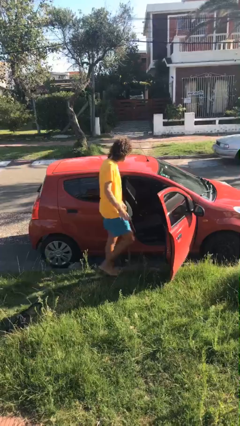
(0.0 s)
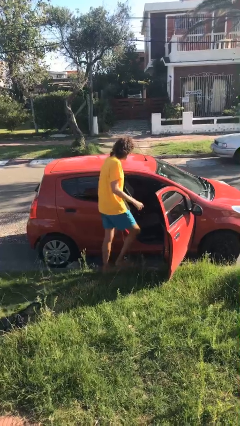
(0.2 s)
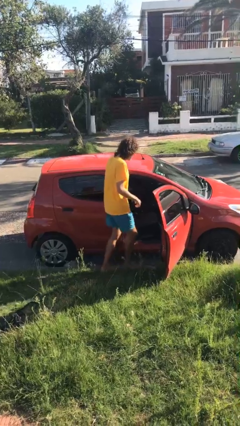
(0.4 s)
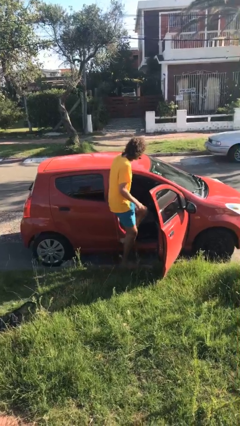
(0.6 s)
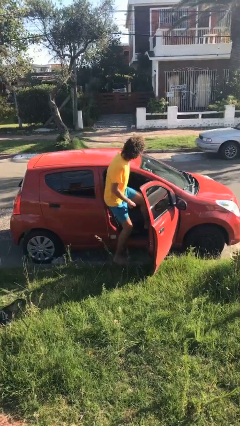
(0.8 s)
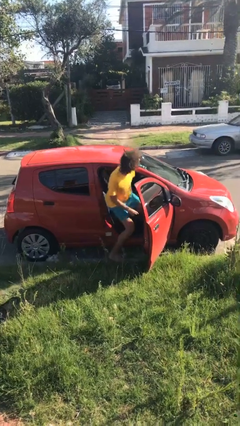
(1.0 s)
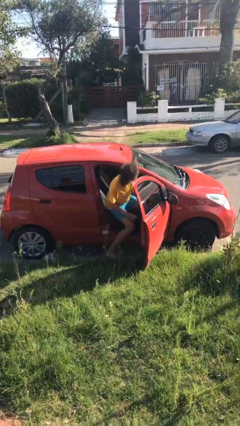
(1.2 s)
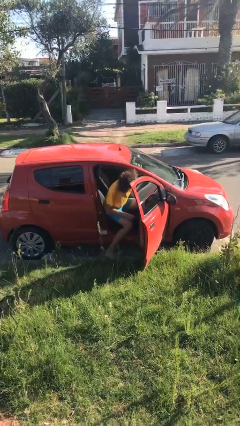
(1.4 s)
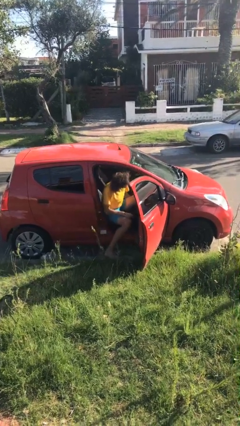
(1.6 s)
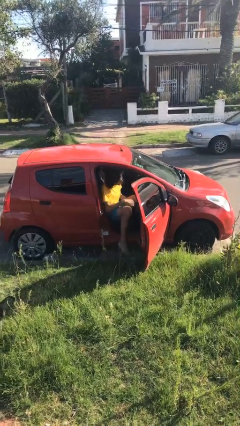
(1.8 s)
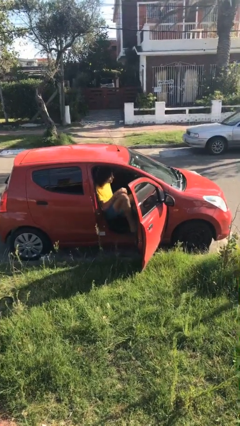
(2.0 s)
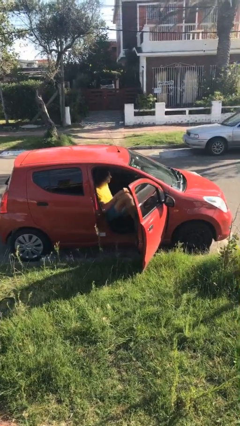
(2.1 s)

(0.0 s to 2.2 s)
person enters car

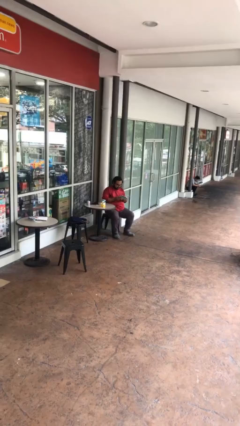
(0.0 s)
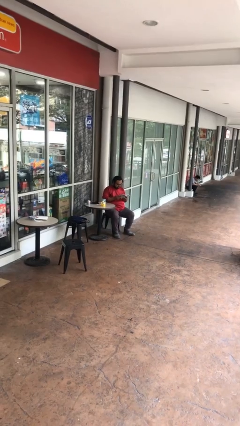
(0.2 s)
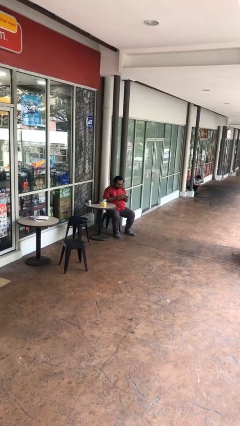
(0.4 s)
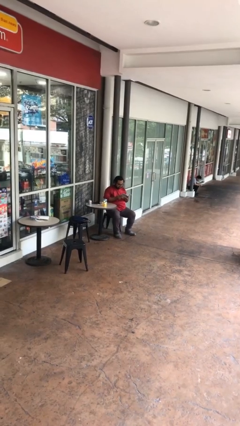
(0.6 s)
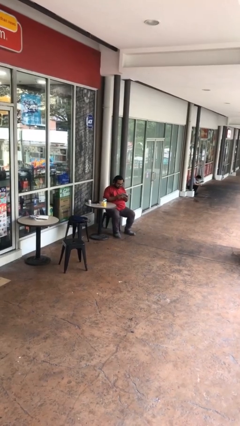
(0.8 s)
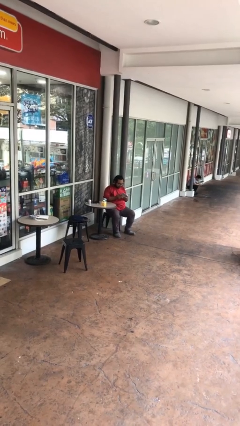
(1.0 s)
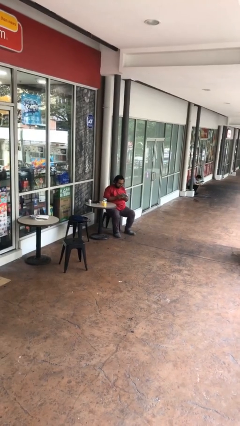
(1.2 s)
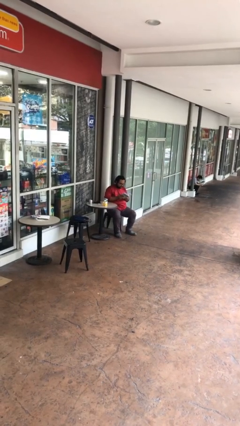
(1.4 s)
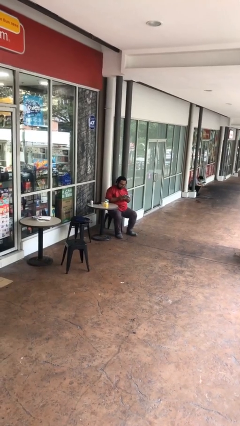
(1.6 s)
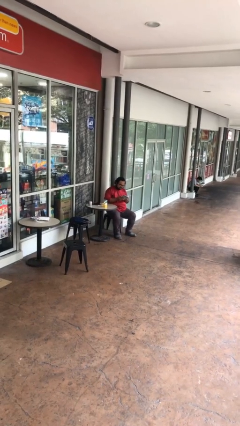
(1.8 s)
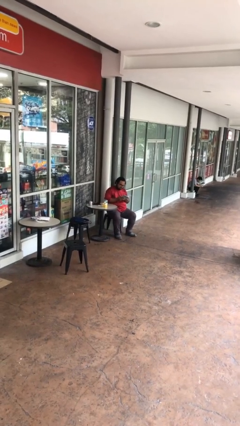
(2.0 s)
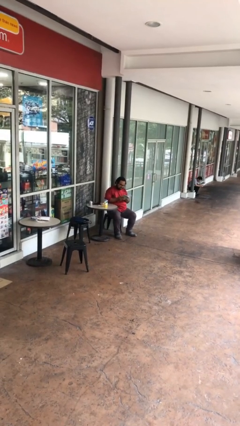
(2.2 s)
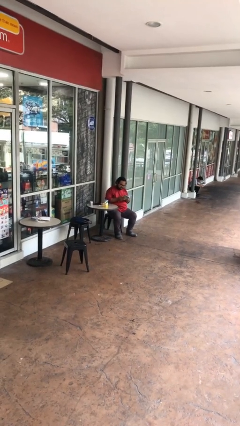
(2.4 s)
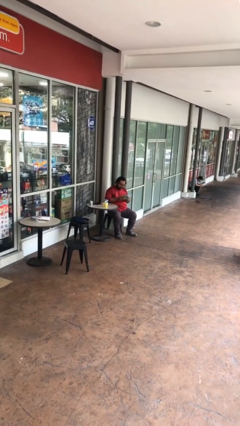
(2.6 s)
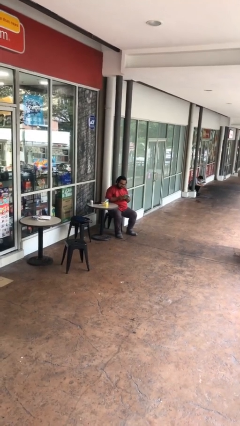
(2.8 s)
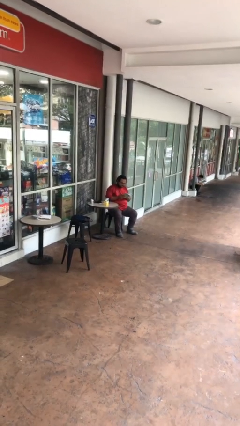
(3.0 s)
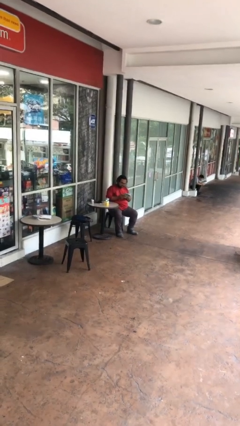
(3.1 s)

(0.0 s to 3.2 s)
person reads document

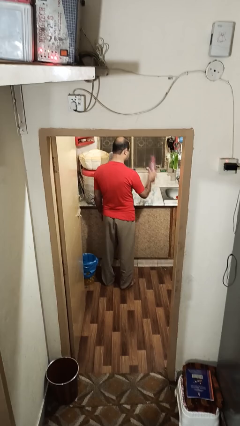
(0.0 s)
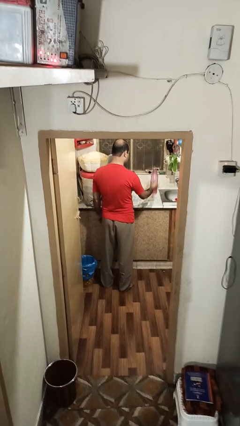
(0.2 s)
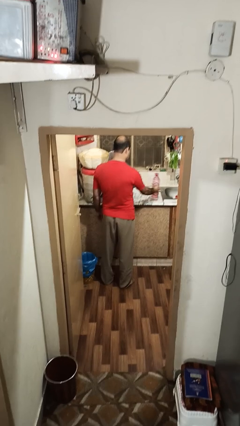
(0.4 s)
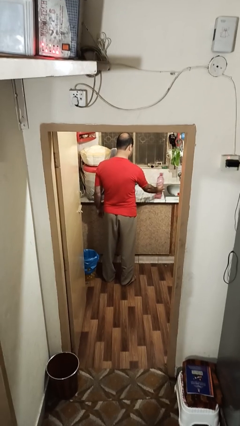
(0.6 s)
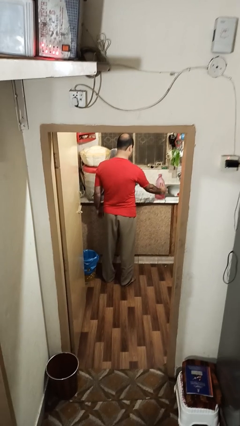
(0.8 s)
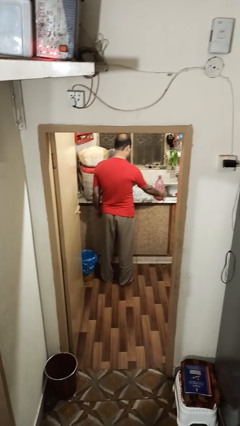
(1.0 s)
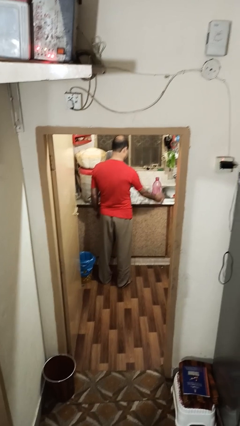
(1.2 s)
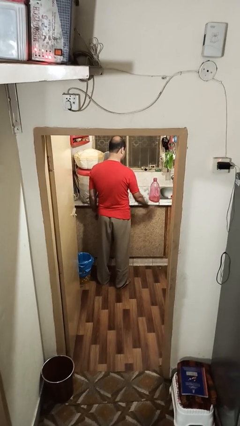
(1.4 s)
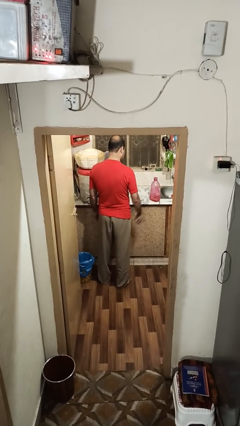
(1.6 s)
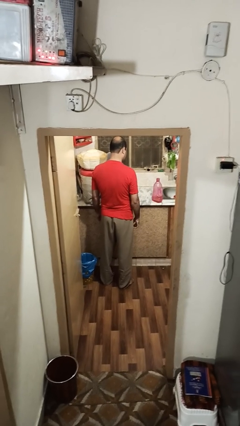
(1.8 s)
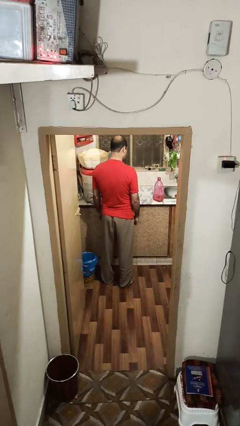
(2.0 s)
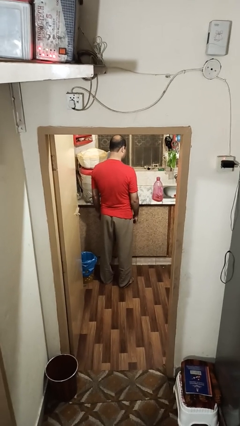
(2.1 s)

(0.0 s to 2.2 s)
person puts down object on countertop

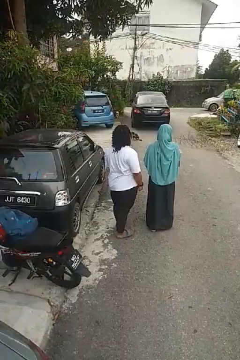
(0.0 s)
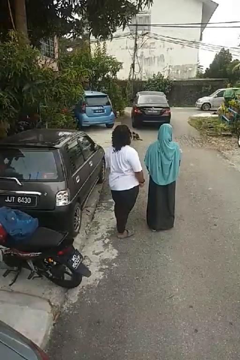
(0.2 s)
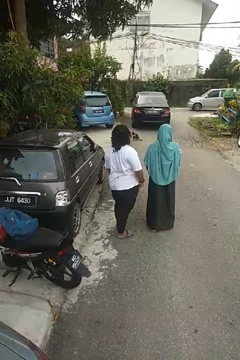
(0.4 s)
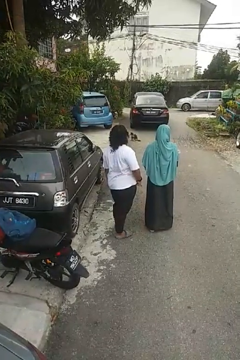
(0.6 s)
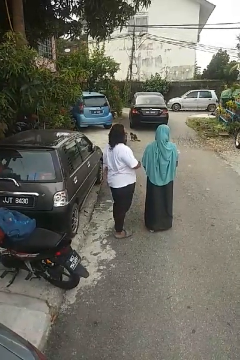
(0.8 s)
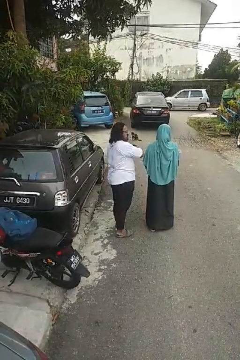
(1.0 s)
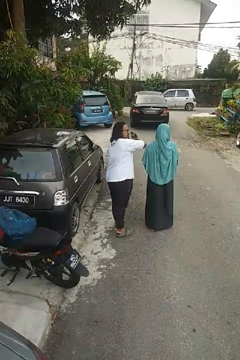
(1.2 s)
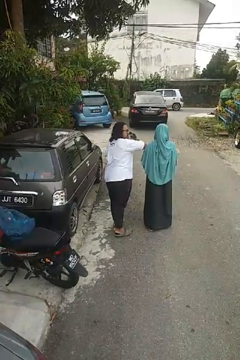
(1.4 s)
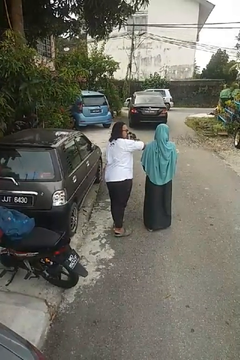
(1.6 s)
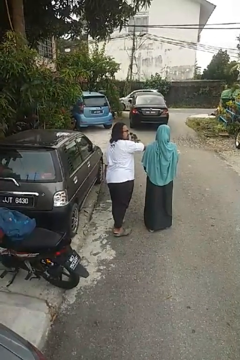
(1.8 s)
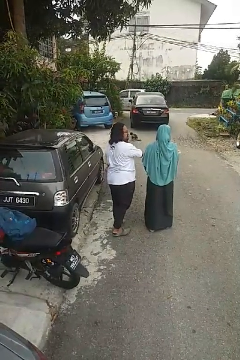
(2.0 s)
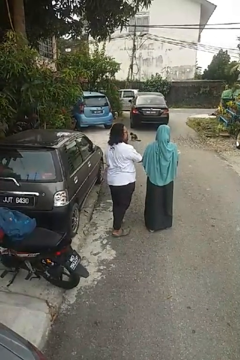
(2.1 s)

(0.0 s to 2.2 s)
person nudges person with elbow

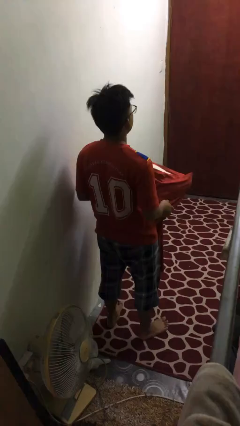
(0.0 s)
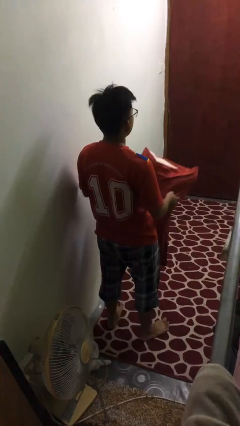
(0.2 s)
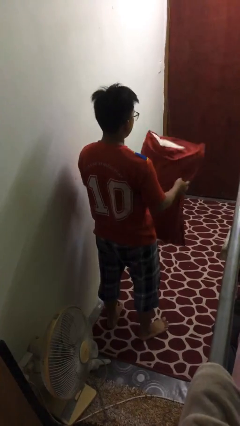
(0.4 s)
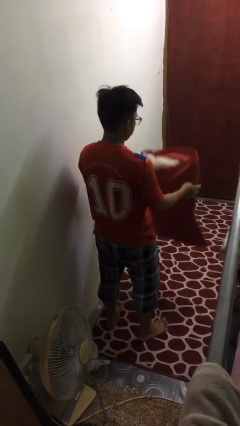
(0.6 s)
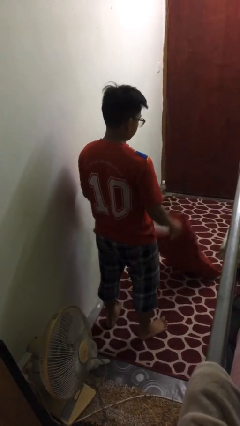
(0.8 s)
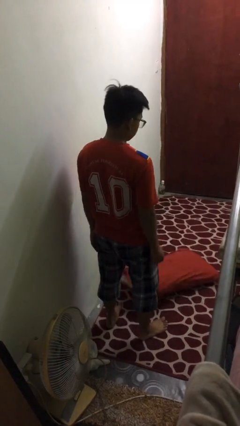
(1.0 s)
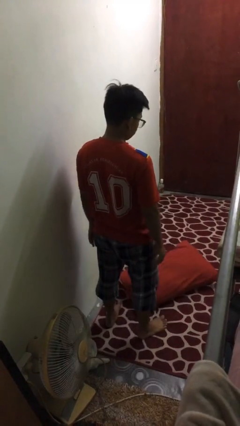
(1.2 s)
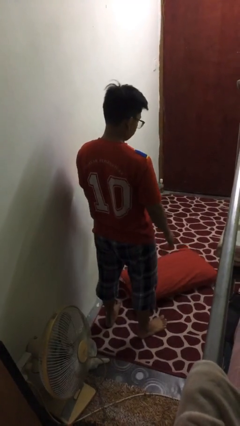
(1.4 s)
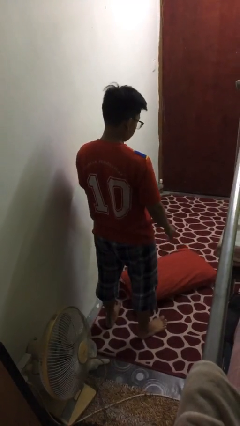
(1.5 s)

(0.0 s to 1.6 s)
person drops object

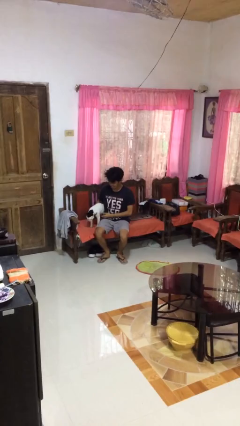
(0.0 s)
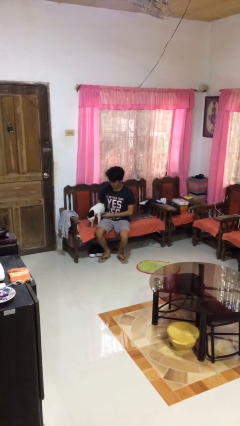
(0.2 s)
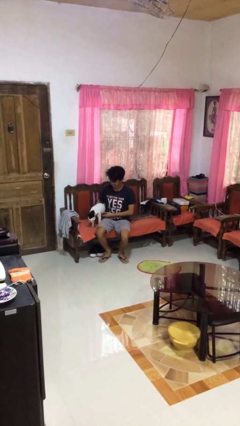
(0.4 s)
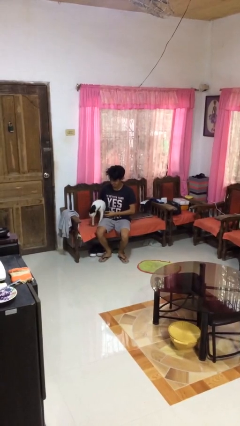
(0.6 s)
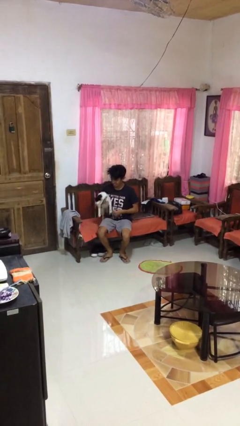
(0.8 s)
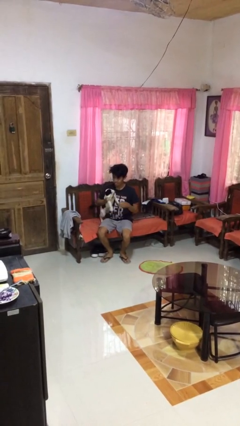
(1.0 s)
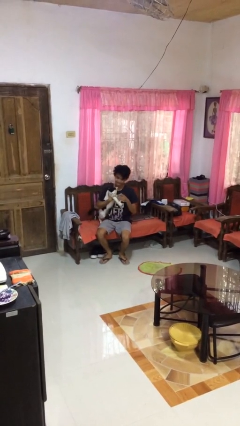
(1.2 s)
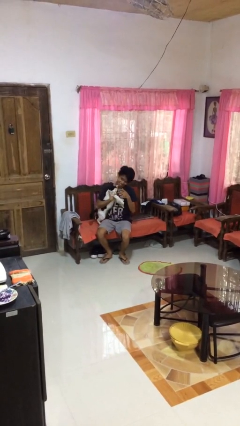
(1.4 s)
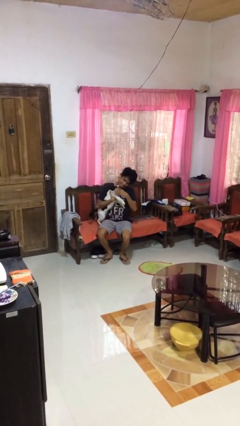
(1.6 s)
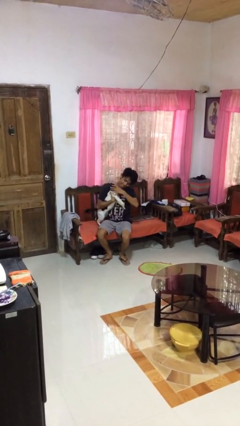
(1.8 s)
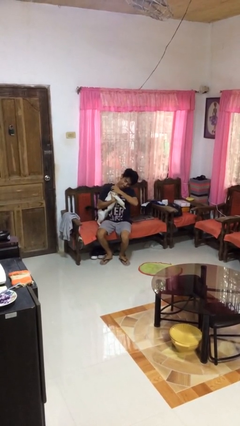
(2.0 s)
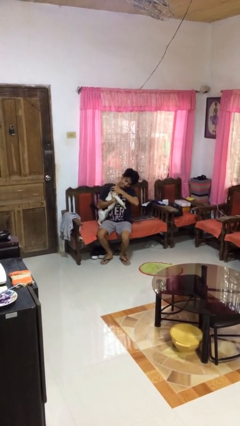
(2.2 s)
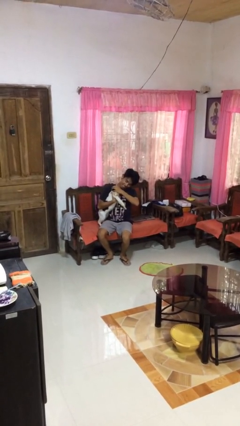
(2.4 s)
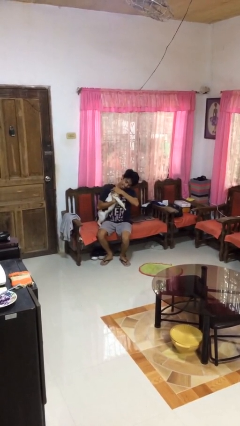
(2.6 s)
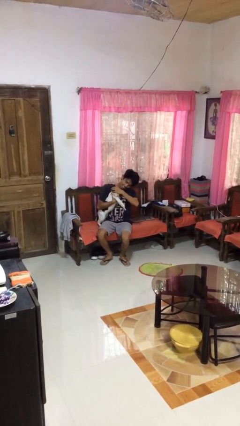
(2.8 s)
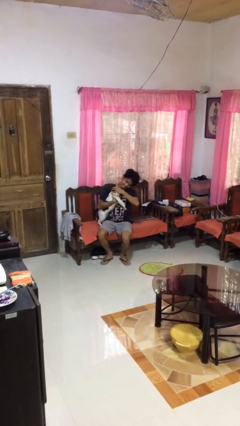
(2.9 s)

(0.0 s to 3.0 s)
person hugs cat

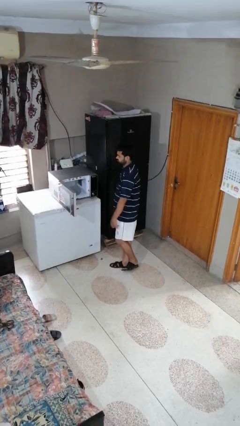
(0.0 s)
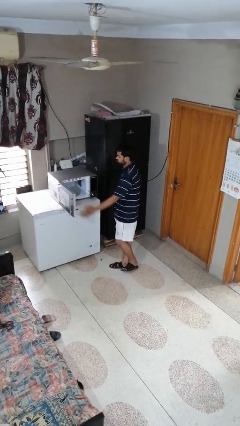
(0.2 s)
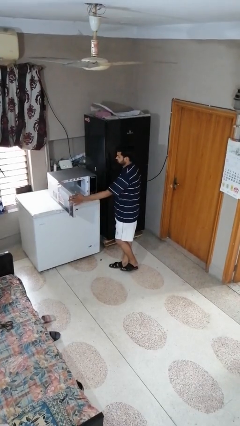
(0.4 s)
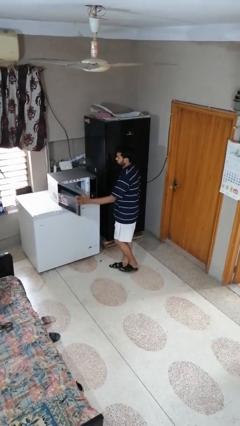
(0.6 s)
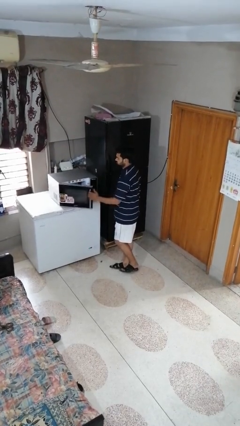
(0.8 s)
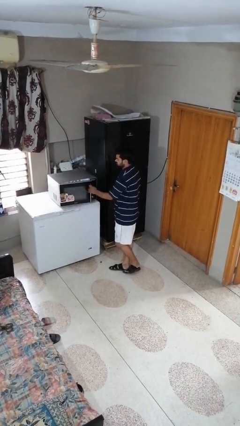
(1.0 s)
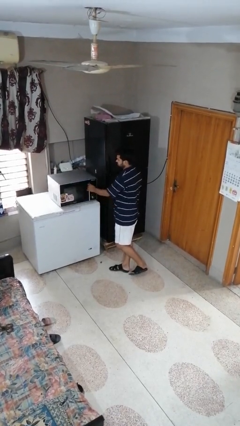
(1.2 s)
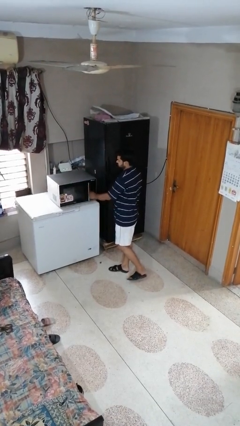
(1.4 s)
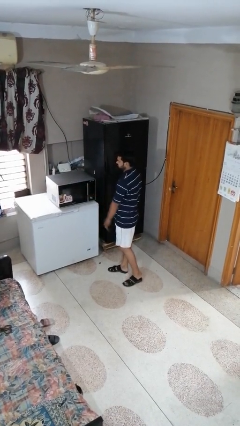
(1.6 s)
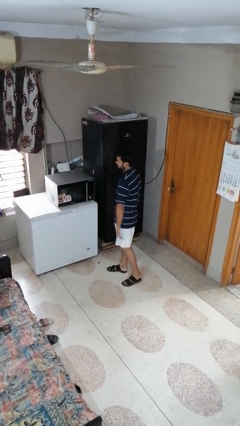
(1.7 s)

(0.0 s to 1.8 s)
person closes microwave

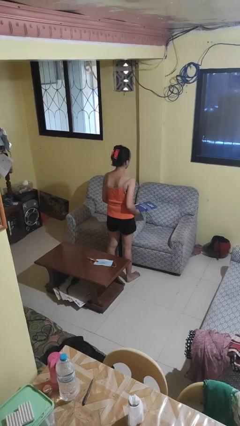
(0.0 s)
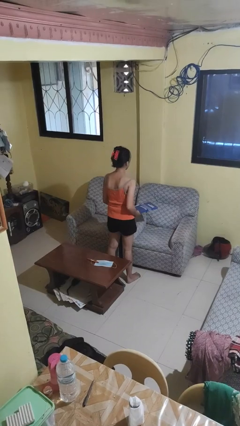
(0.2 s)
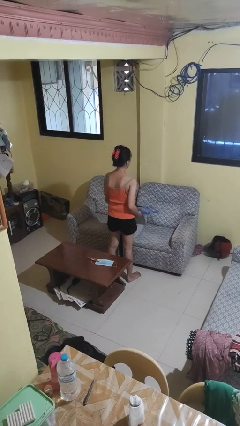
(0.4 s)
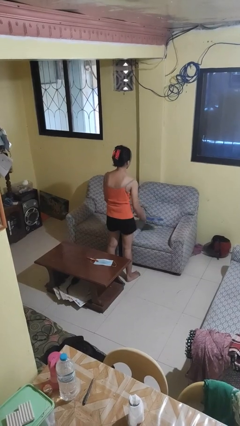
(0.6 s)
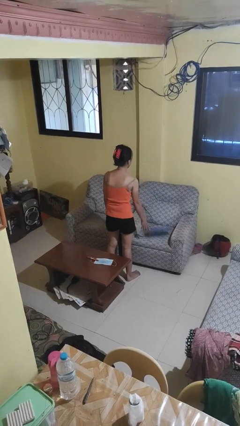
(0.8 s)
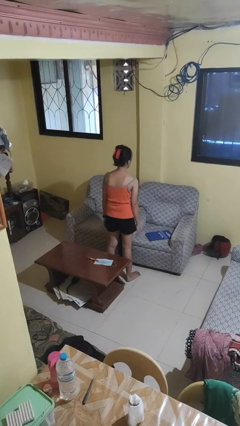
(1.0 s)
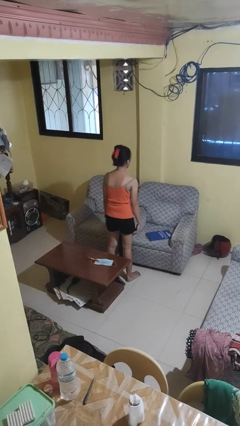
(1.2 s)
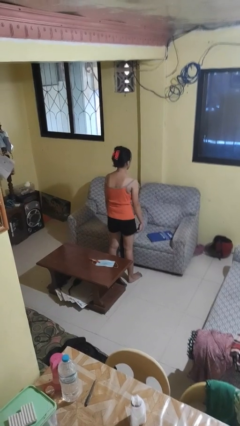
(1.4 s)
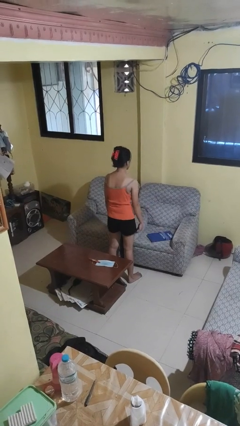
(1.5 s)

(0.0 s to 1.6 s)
person puts down object on couch
